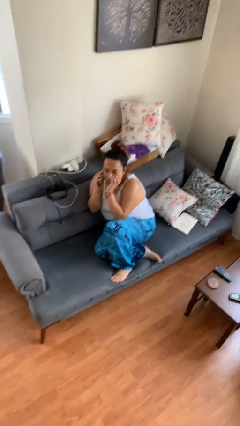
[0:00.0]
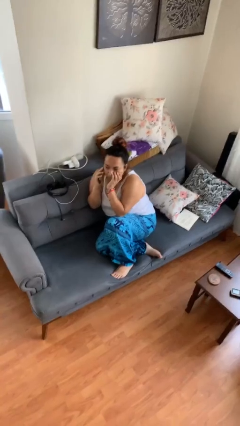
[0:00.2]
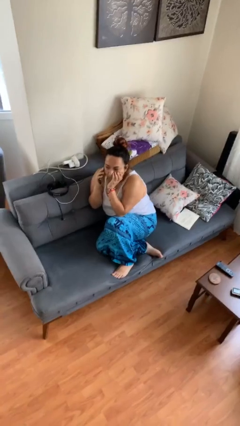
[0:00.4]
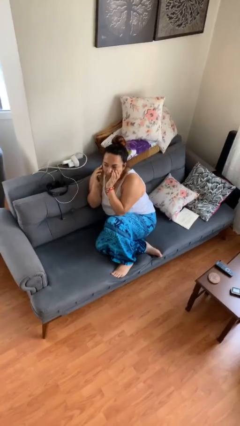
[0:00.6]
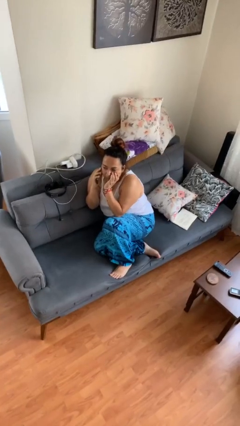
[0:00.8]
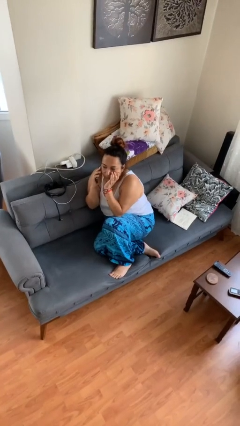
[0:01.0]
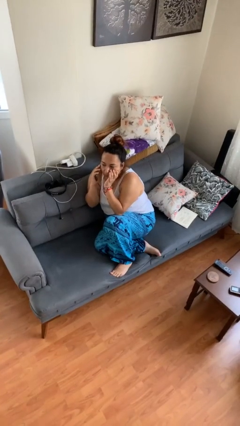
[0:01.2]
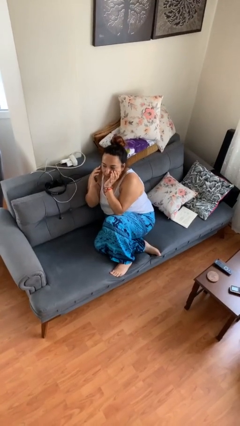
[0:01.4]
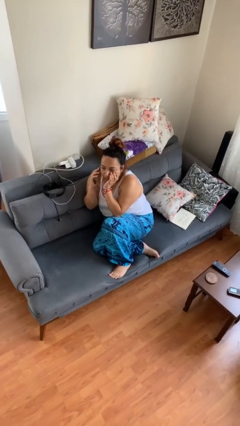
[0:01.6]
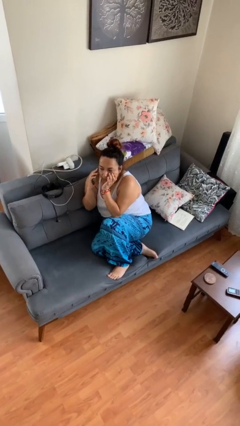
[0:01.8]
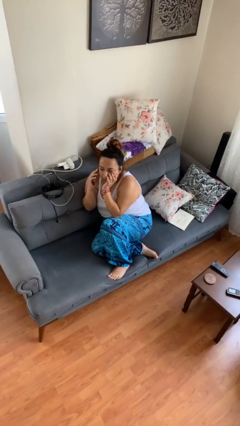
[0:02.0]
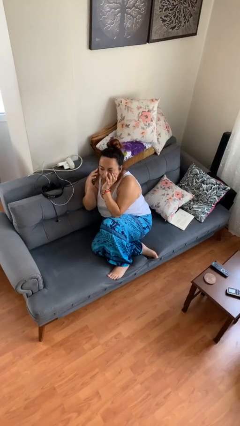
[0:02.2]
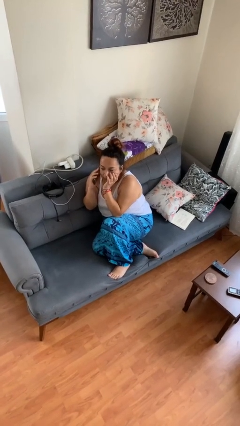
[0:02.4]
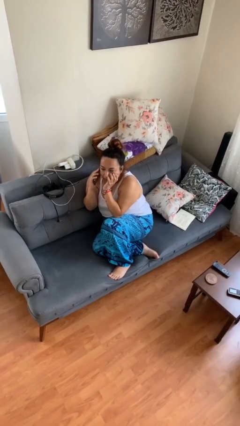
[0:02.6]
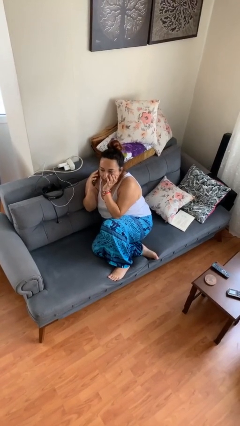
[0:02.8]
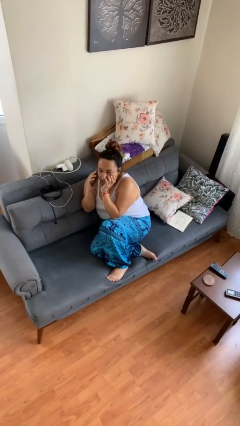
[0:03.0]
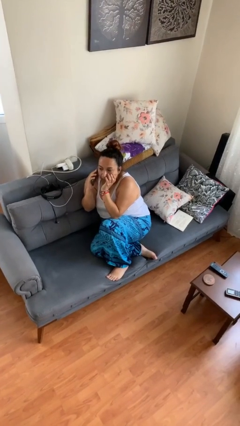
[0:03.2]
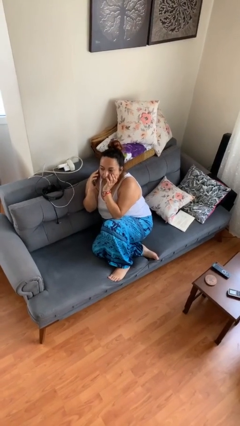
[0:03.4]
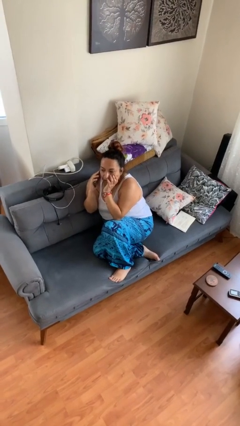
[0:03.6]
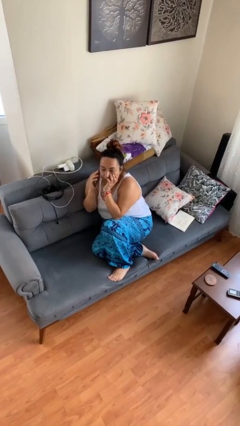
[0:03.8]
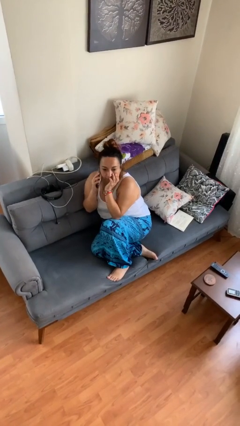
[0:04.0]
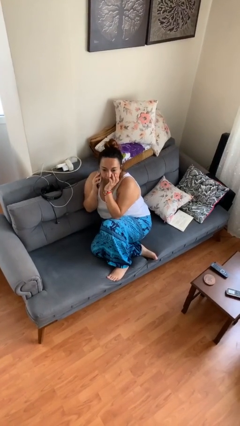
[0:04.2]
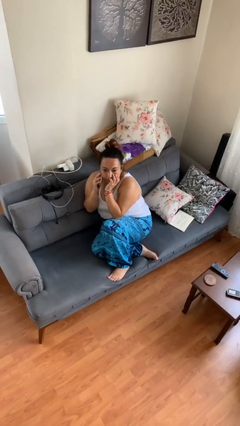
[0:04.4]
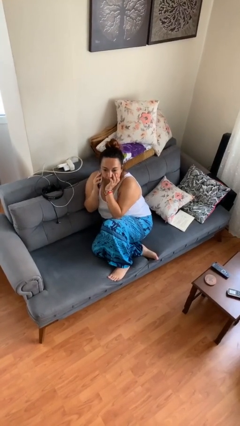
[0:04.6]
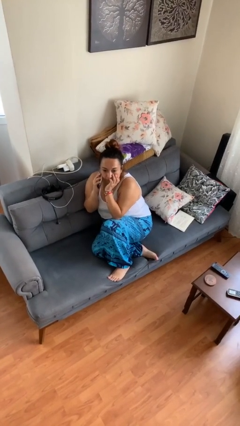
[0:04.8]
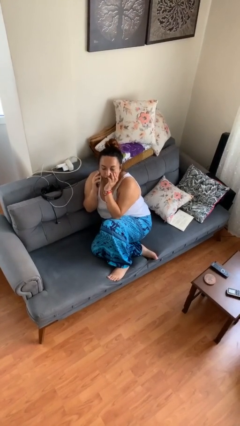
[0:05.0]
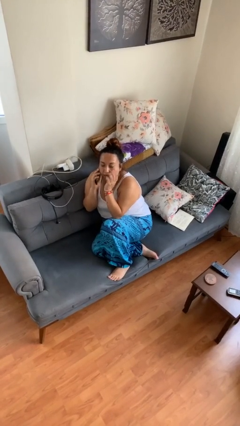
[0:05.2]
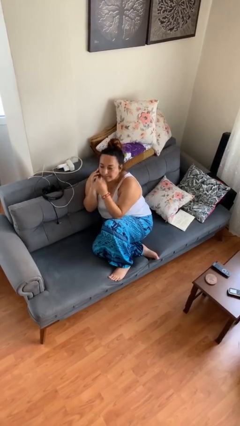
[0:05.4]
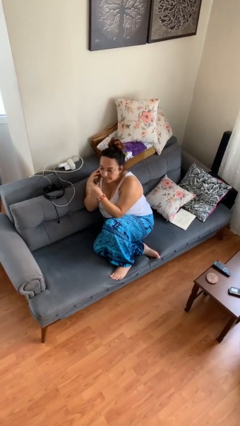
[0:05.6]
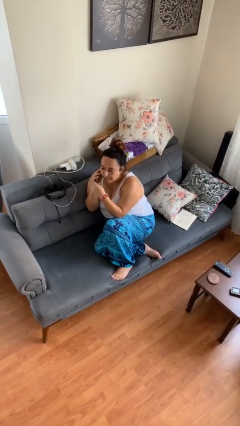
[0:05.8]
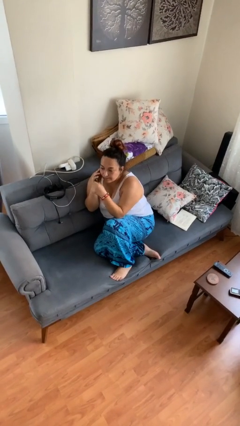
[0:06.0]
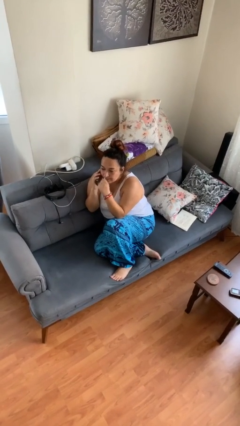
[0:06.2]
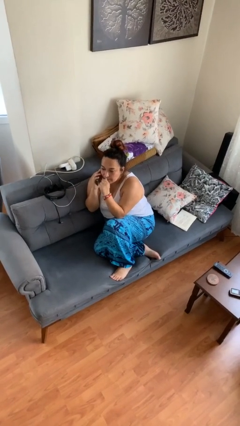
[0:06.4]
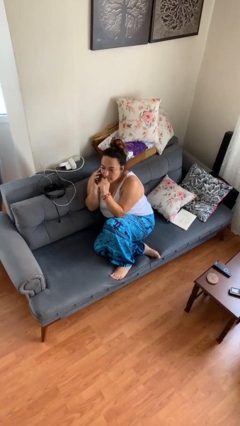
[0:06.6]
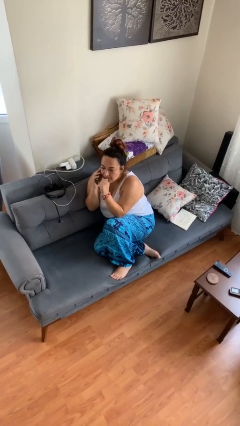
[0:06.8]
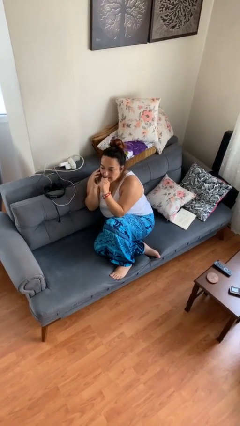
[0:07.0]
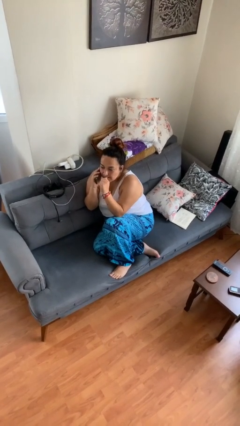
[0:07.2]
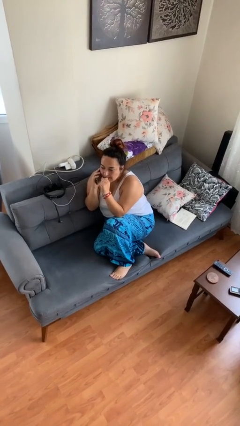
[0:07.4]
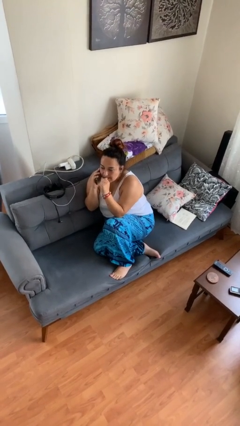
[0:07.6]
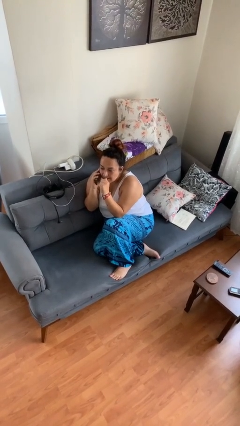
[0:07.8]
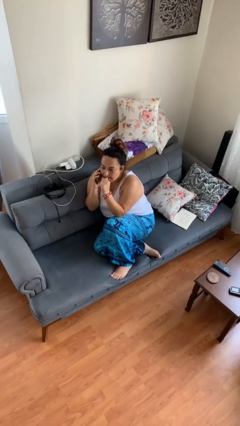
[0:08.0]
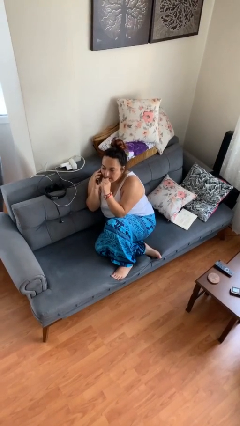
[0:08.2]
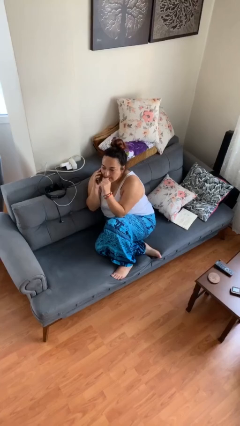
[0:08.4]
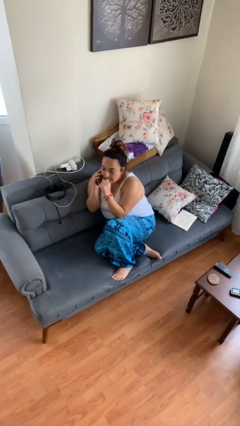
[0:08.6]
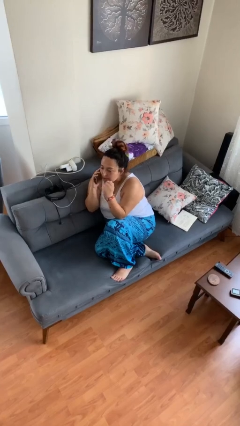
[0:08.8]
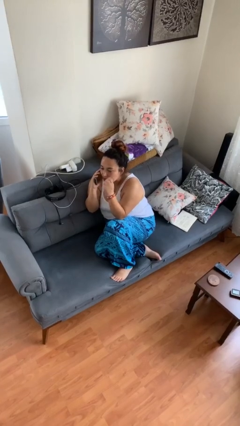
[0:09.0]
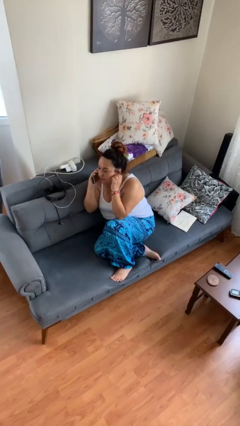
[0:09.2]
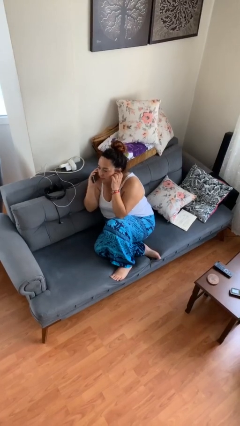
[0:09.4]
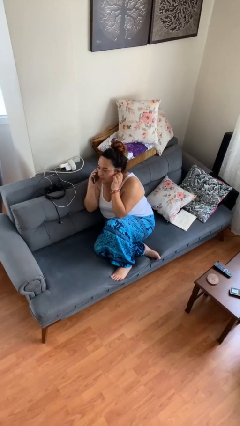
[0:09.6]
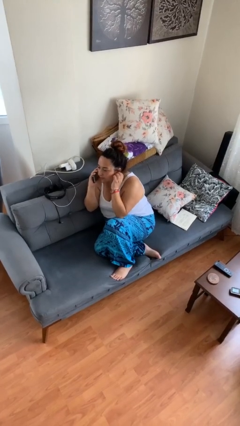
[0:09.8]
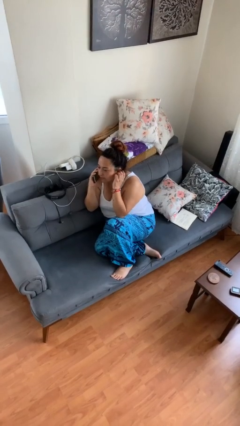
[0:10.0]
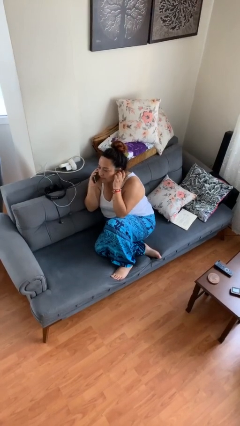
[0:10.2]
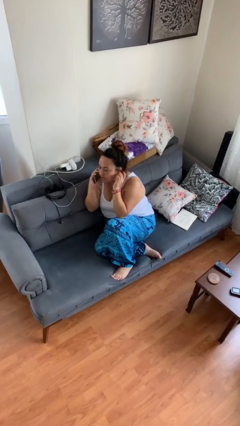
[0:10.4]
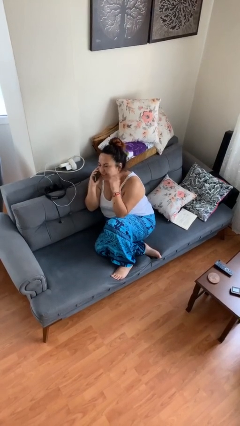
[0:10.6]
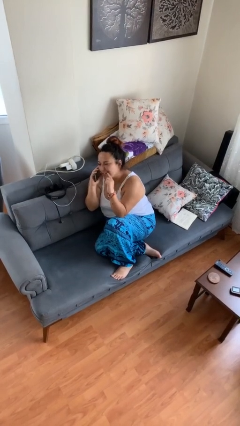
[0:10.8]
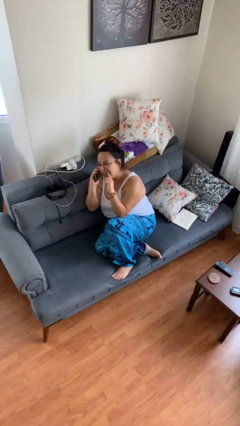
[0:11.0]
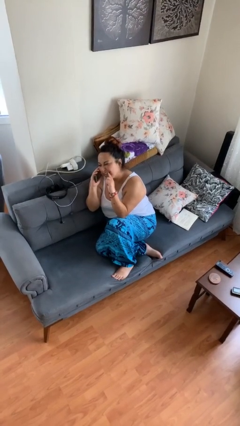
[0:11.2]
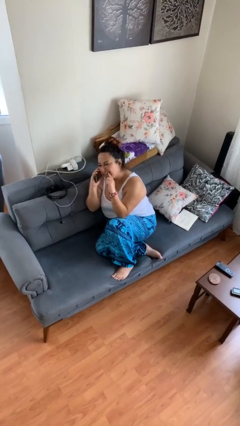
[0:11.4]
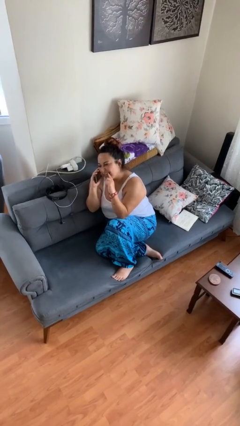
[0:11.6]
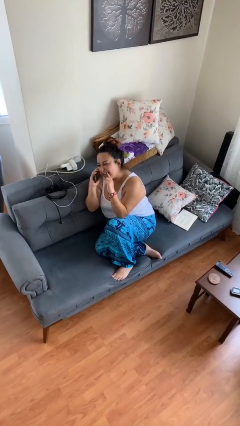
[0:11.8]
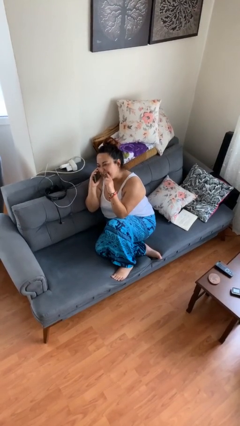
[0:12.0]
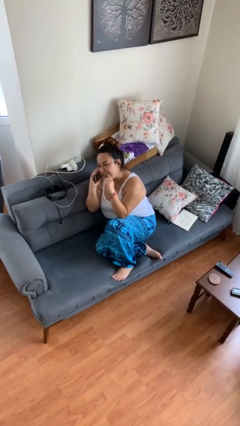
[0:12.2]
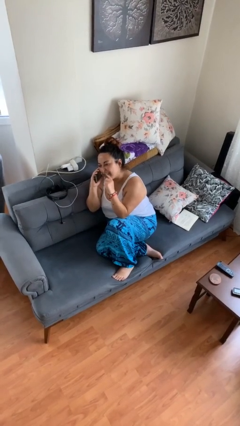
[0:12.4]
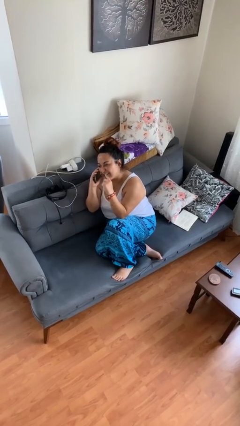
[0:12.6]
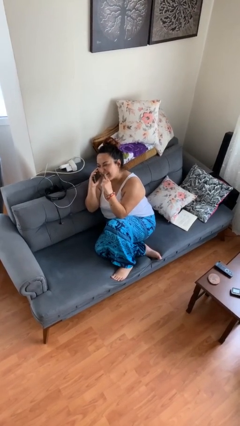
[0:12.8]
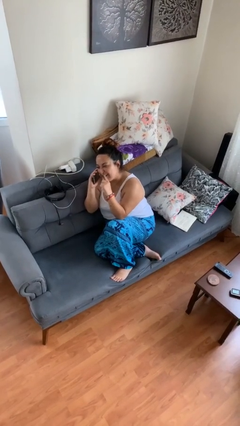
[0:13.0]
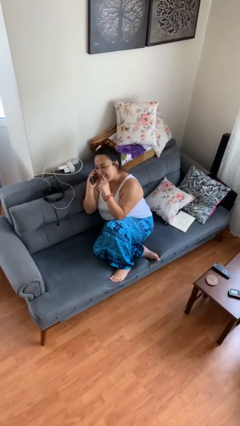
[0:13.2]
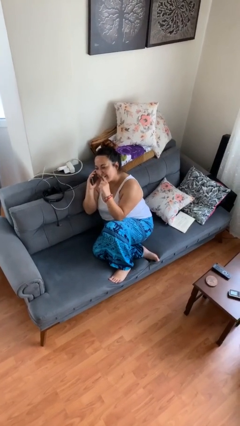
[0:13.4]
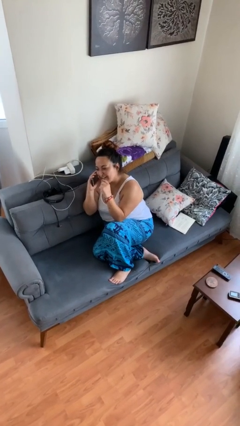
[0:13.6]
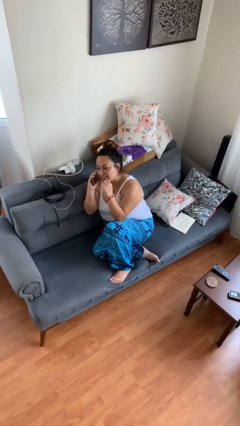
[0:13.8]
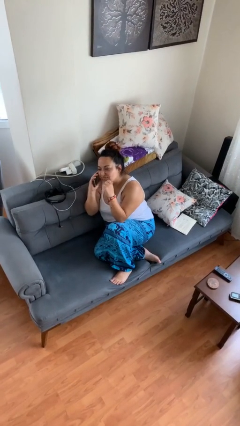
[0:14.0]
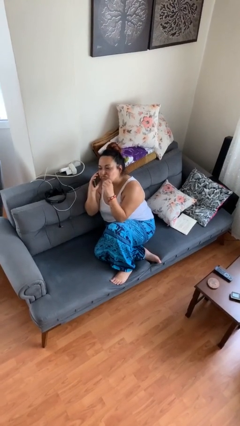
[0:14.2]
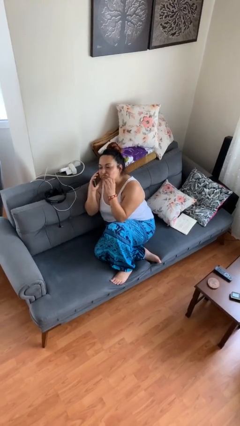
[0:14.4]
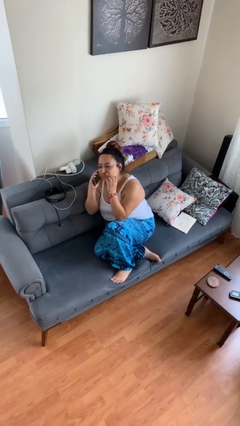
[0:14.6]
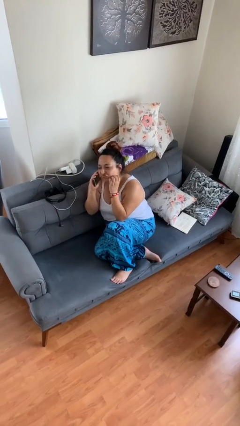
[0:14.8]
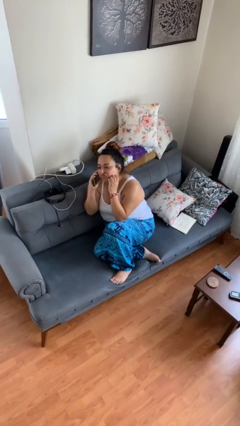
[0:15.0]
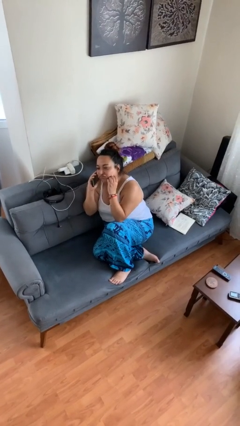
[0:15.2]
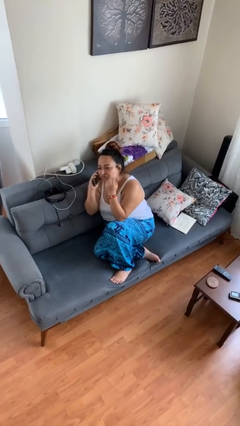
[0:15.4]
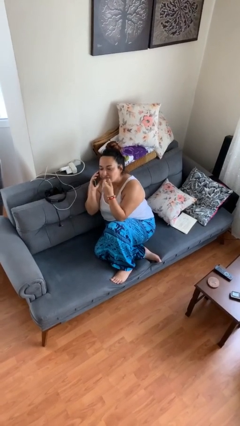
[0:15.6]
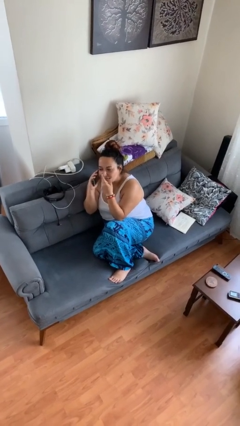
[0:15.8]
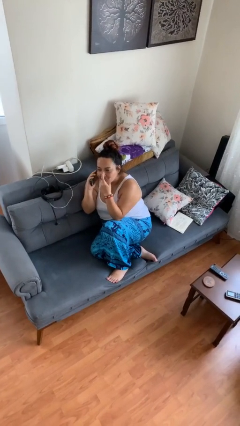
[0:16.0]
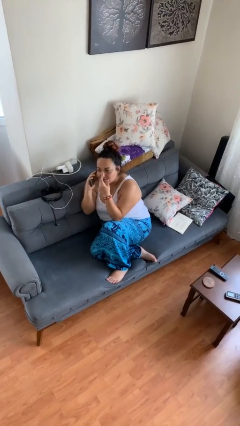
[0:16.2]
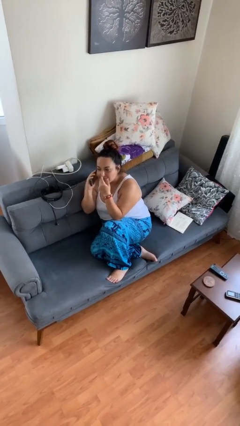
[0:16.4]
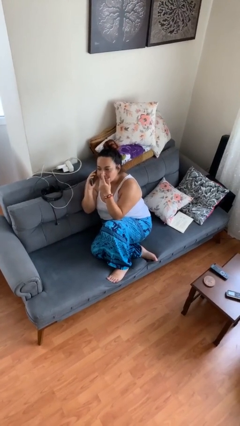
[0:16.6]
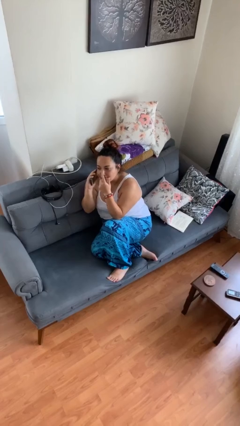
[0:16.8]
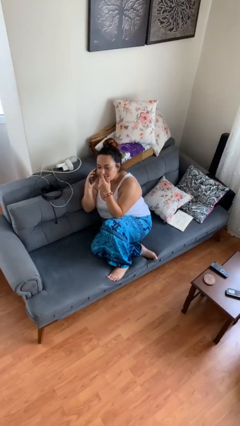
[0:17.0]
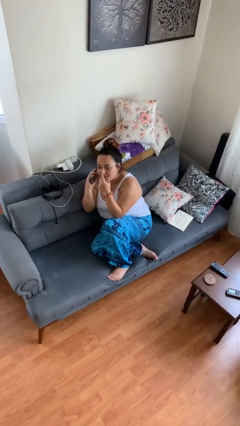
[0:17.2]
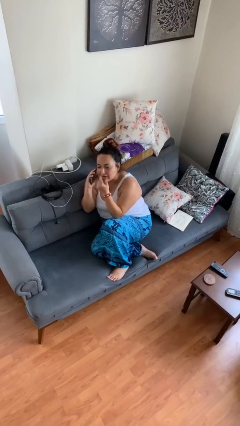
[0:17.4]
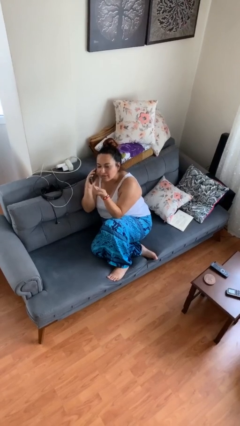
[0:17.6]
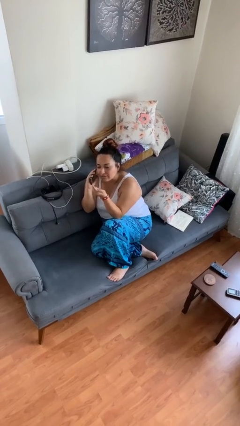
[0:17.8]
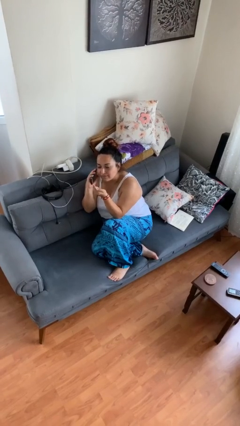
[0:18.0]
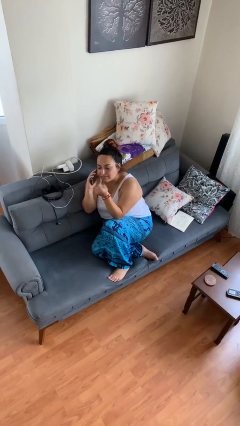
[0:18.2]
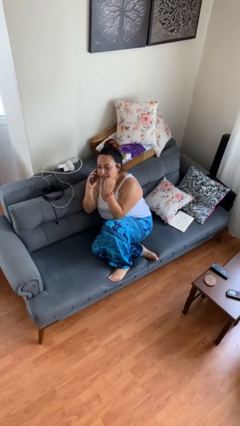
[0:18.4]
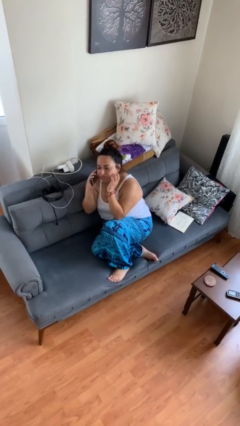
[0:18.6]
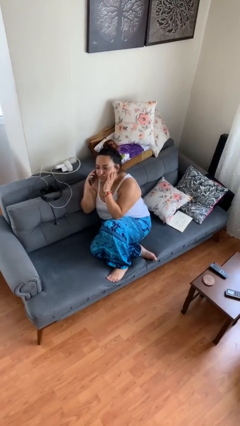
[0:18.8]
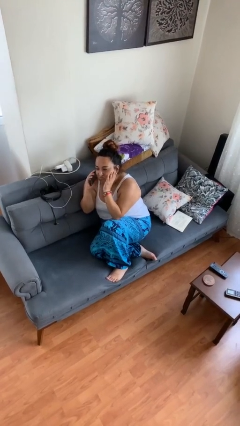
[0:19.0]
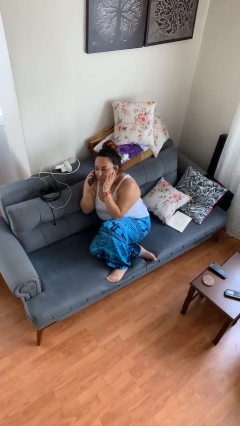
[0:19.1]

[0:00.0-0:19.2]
person talks on phone
